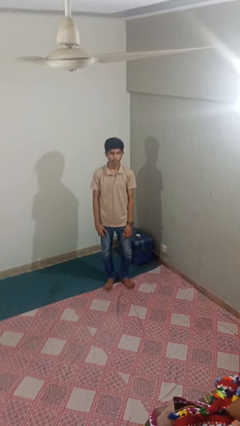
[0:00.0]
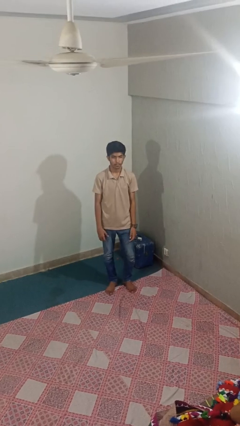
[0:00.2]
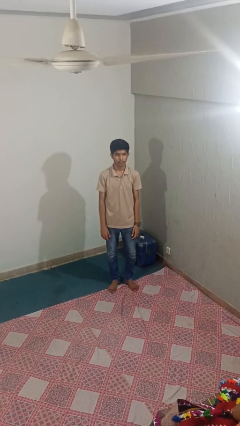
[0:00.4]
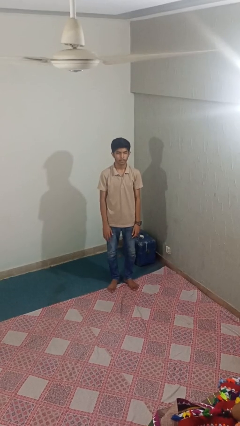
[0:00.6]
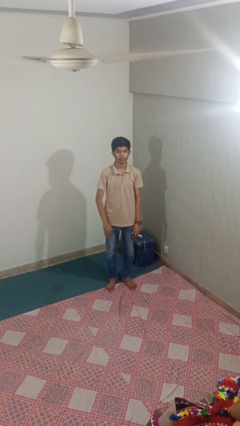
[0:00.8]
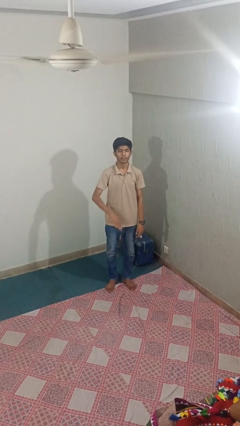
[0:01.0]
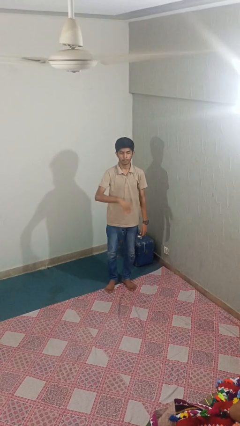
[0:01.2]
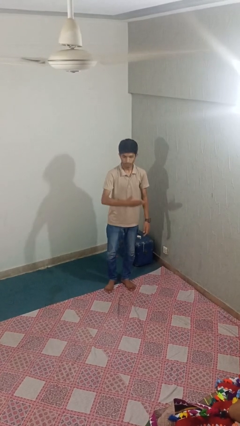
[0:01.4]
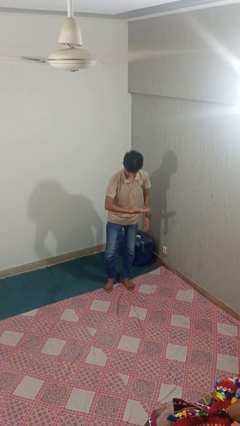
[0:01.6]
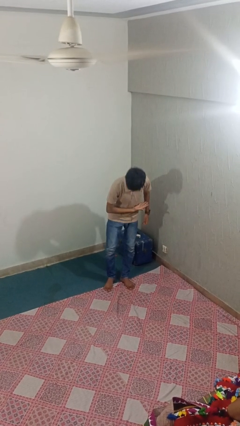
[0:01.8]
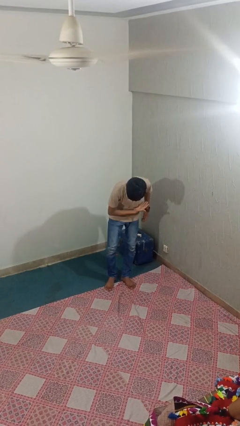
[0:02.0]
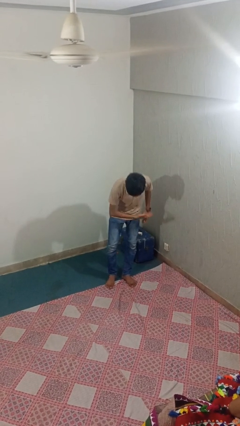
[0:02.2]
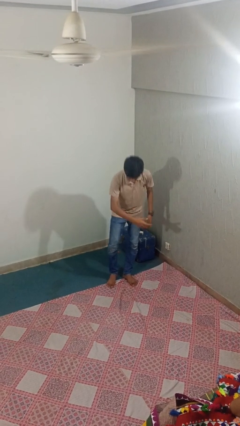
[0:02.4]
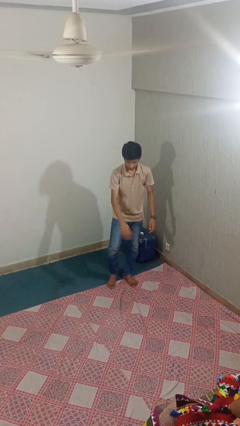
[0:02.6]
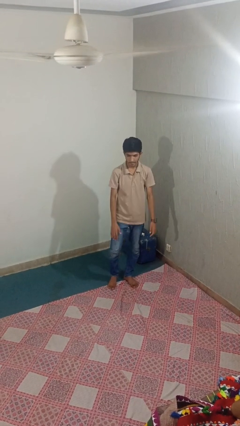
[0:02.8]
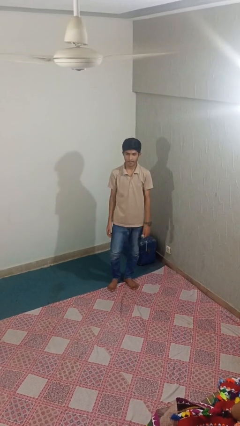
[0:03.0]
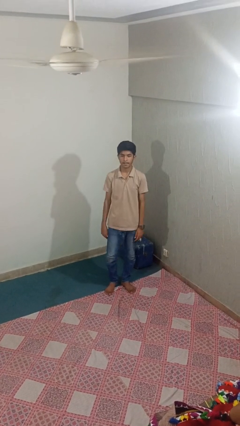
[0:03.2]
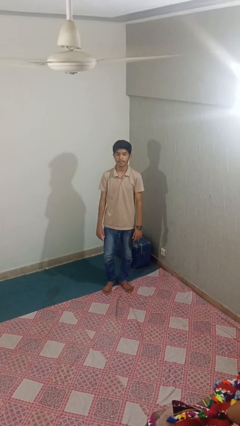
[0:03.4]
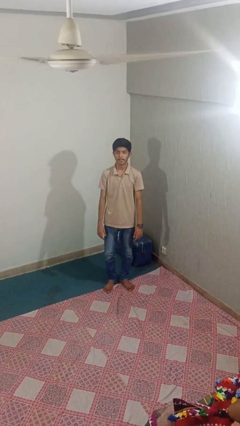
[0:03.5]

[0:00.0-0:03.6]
person bows

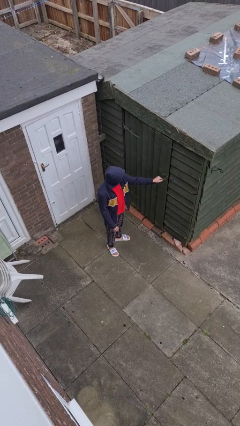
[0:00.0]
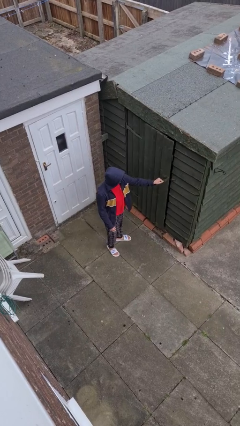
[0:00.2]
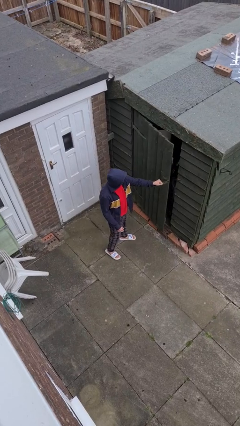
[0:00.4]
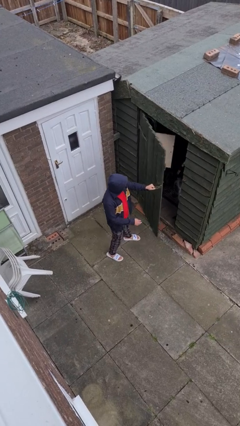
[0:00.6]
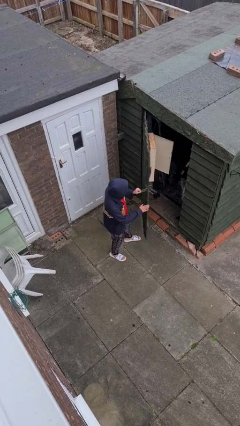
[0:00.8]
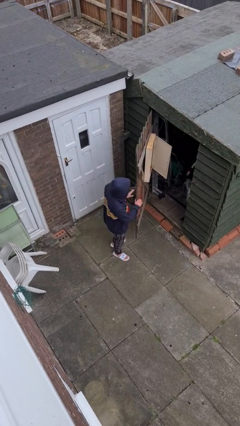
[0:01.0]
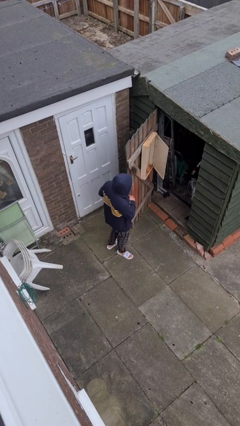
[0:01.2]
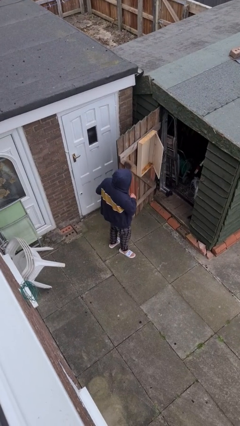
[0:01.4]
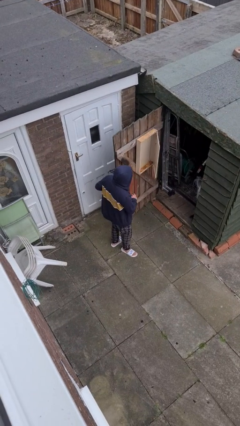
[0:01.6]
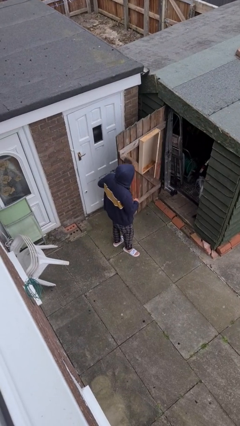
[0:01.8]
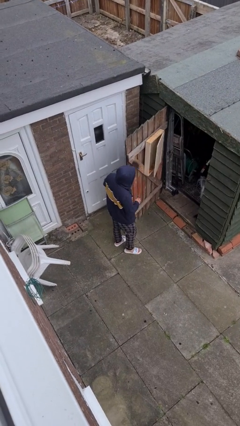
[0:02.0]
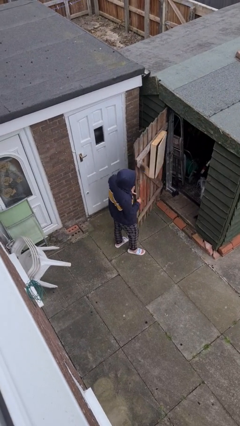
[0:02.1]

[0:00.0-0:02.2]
person opens facility door

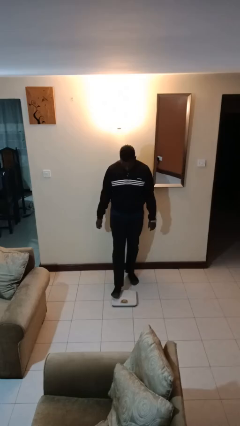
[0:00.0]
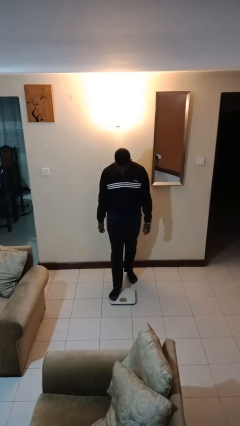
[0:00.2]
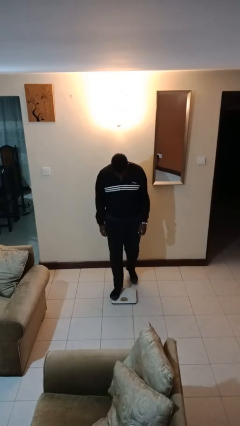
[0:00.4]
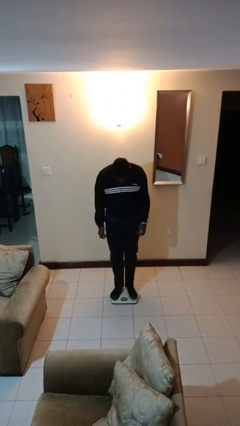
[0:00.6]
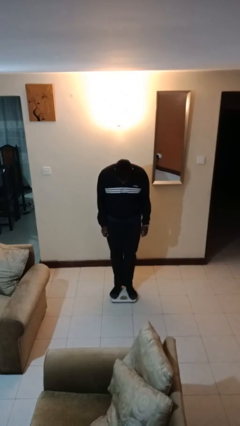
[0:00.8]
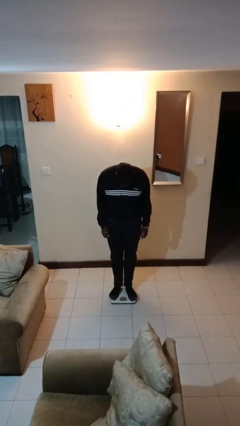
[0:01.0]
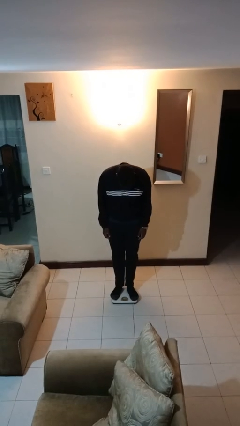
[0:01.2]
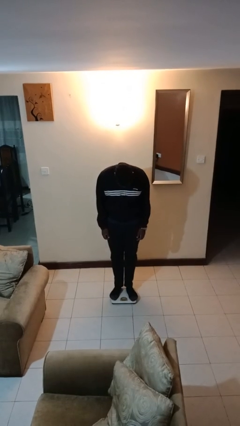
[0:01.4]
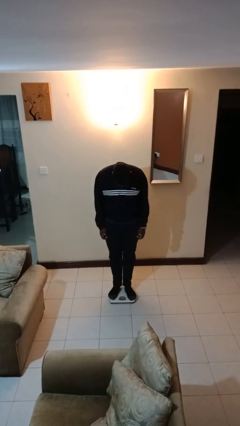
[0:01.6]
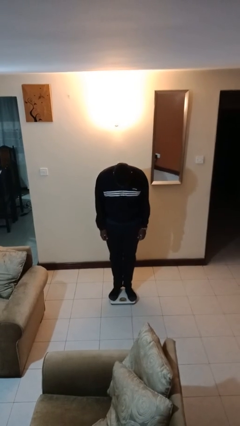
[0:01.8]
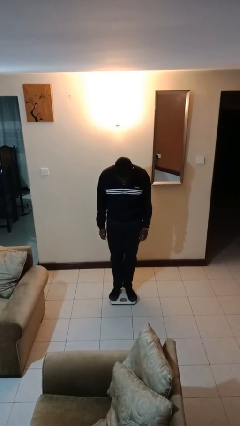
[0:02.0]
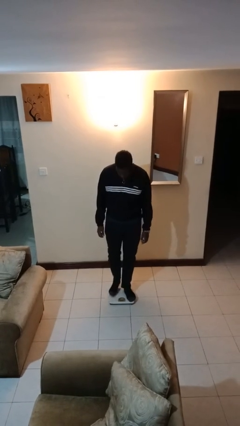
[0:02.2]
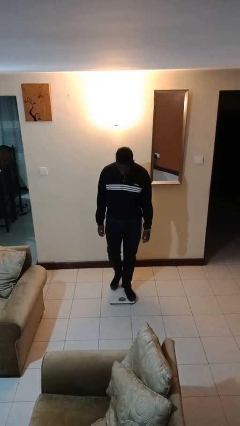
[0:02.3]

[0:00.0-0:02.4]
person uses bodyweight scale

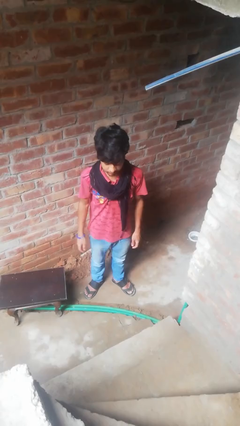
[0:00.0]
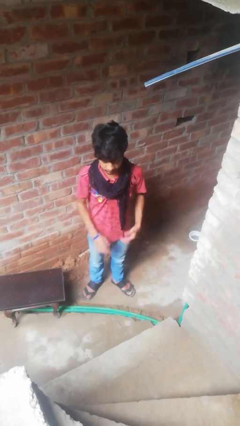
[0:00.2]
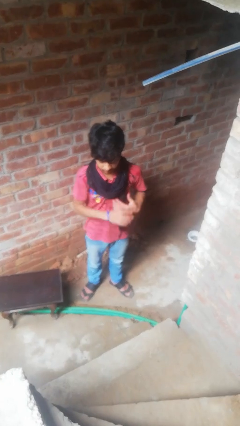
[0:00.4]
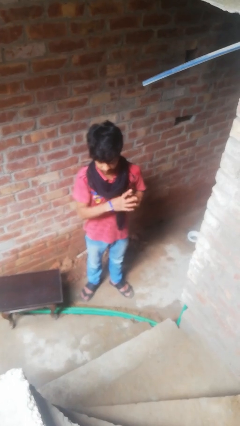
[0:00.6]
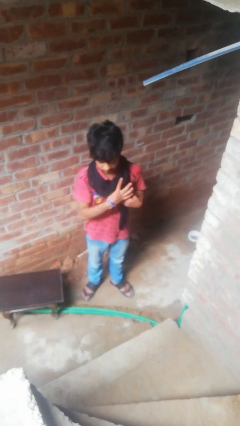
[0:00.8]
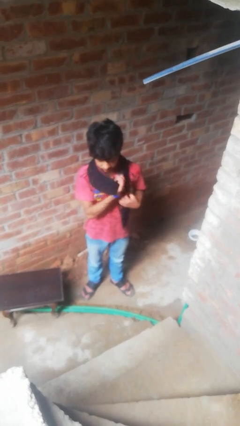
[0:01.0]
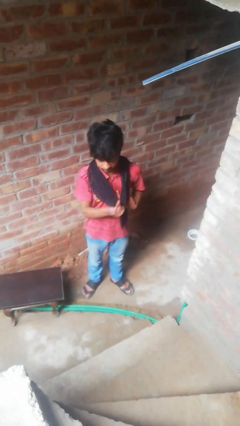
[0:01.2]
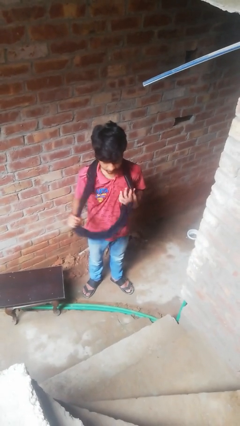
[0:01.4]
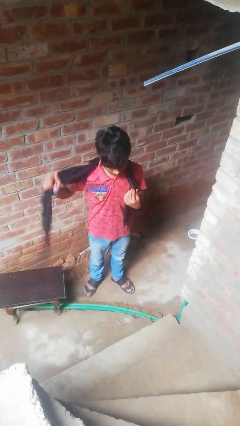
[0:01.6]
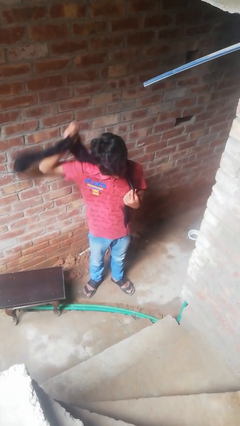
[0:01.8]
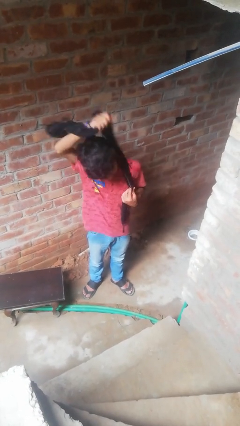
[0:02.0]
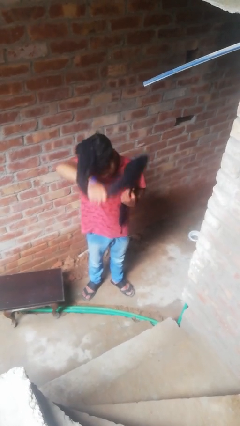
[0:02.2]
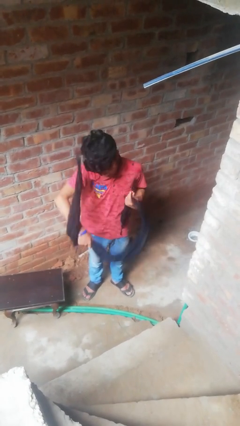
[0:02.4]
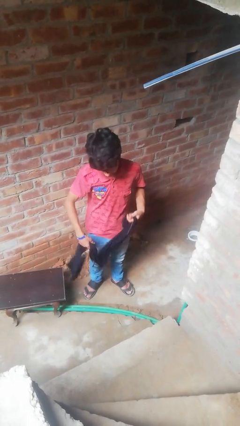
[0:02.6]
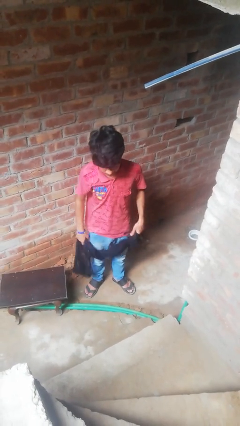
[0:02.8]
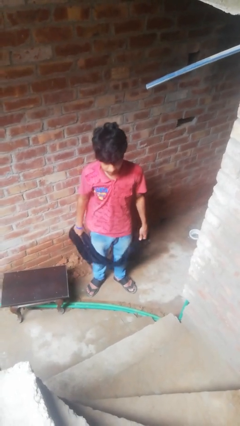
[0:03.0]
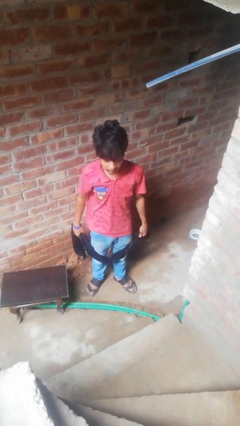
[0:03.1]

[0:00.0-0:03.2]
person takes off scarf

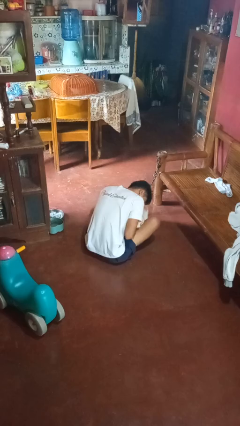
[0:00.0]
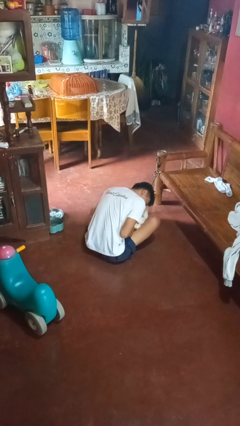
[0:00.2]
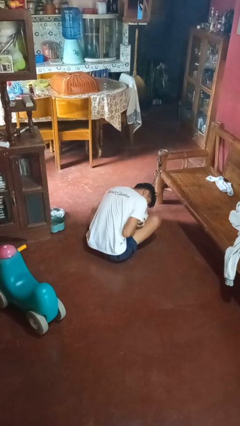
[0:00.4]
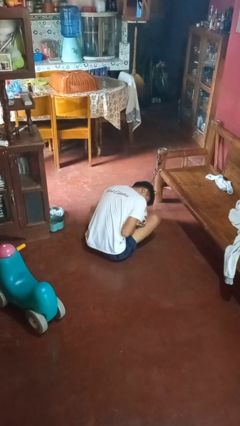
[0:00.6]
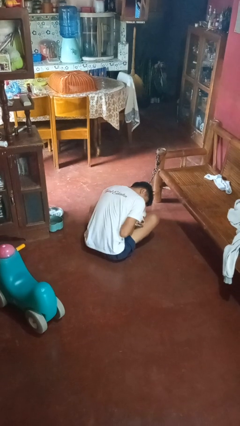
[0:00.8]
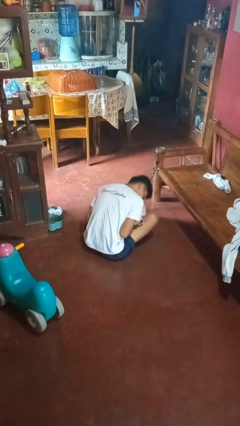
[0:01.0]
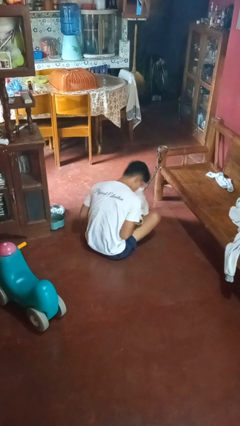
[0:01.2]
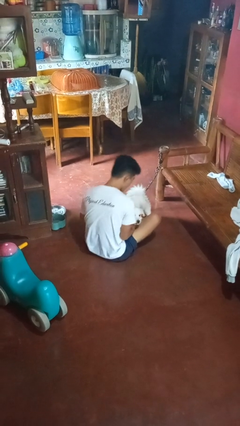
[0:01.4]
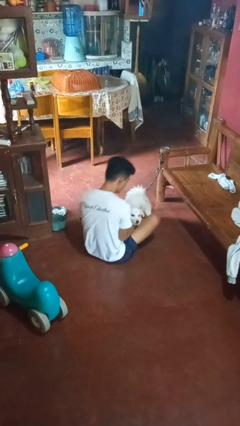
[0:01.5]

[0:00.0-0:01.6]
person hugs dog

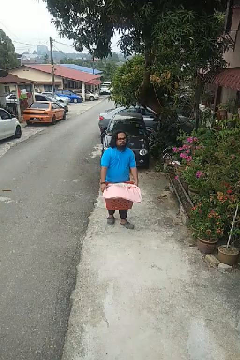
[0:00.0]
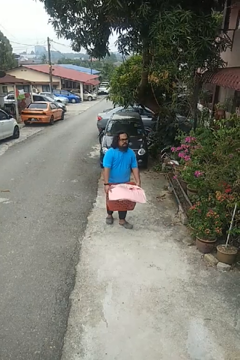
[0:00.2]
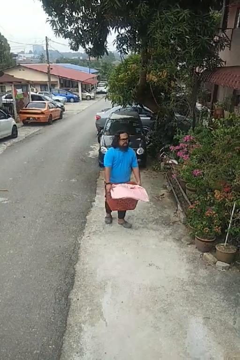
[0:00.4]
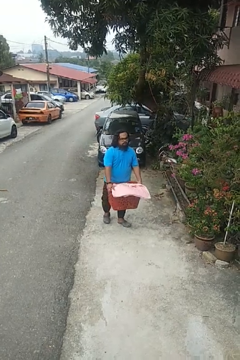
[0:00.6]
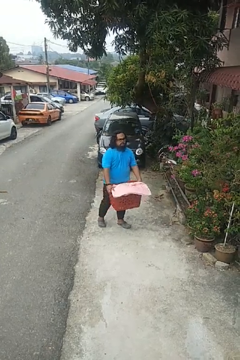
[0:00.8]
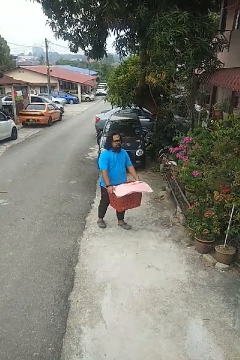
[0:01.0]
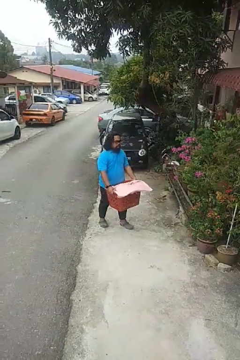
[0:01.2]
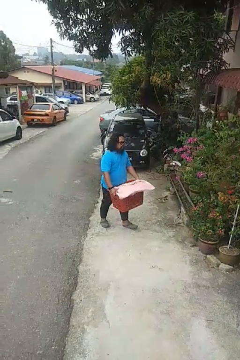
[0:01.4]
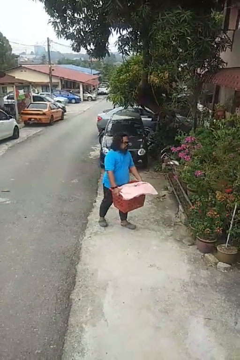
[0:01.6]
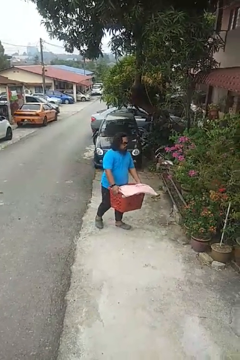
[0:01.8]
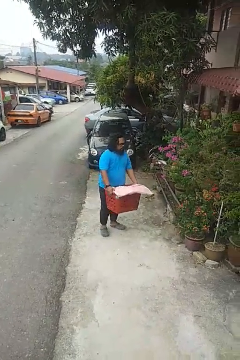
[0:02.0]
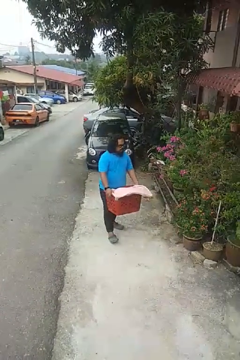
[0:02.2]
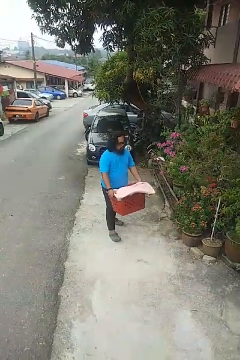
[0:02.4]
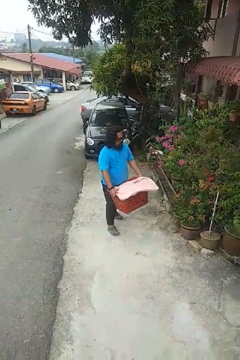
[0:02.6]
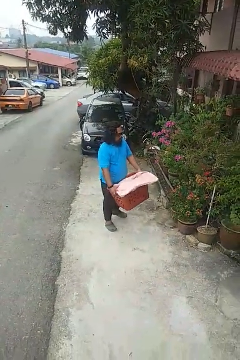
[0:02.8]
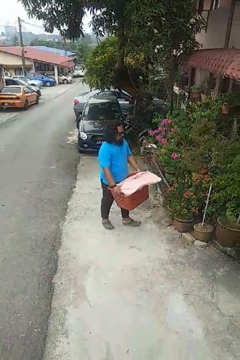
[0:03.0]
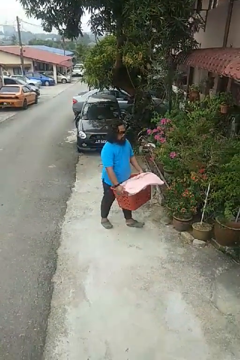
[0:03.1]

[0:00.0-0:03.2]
person carries laundry basket

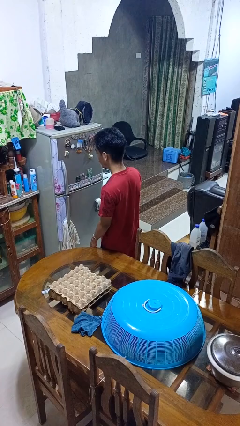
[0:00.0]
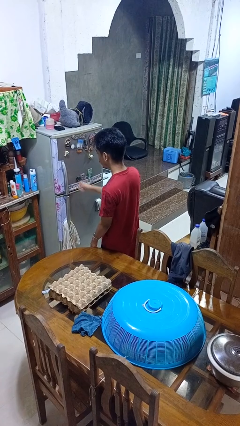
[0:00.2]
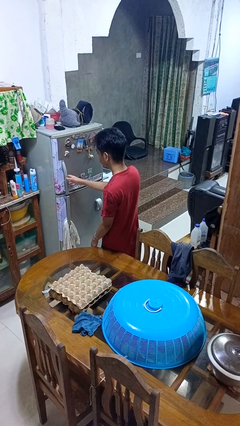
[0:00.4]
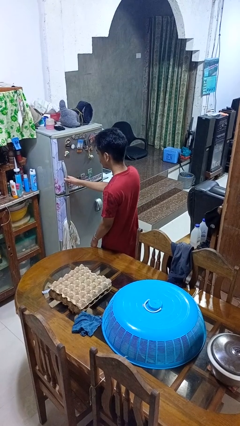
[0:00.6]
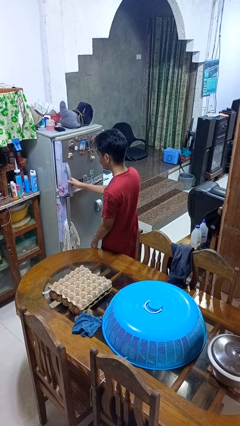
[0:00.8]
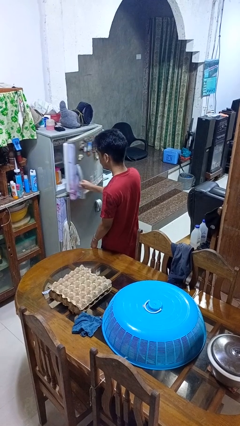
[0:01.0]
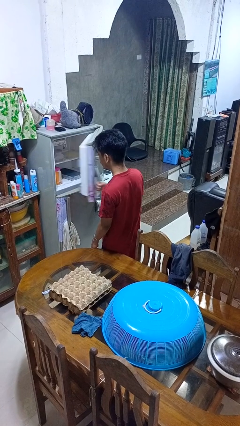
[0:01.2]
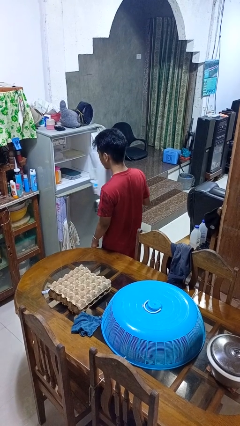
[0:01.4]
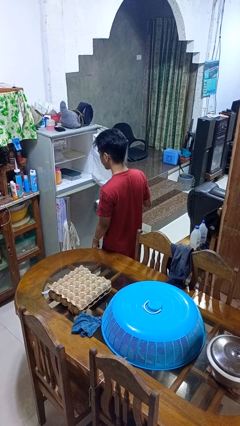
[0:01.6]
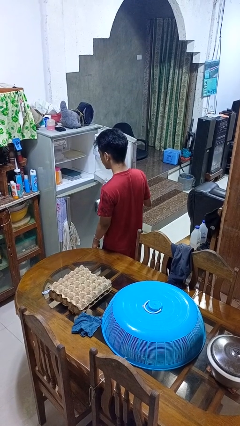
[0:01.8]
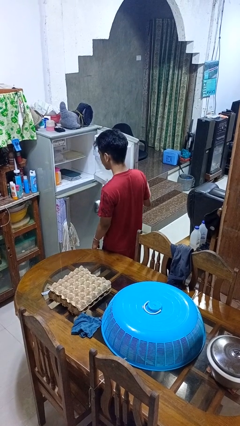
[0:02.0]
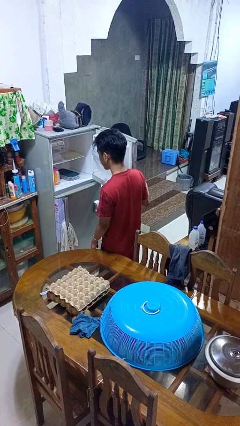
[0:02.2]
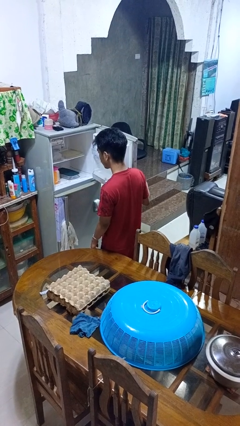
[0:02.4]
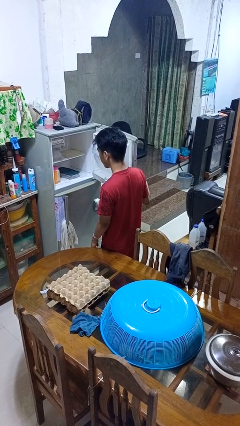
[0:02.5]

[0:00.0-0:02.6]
person opens refrigerator
